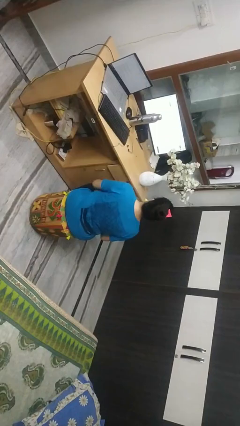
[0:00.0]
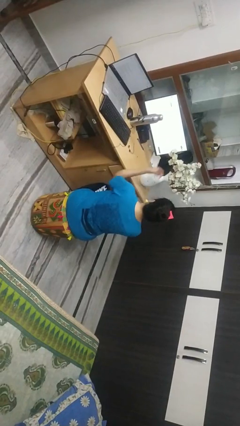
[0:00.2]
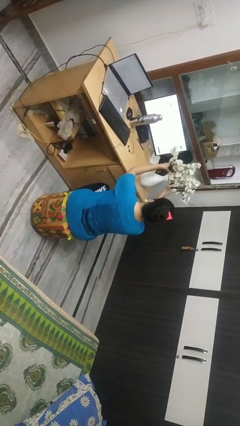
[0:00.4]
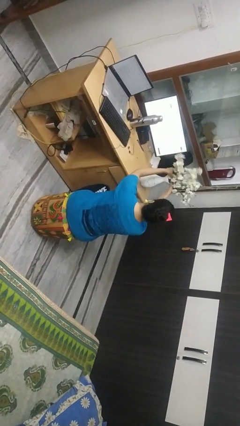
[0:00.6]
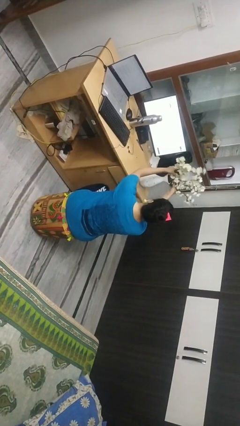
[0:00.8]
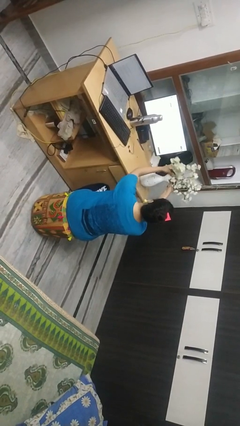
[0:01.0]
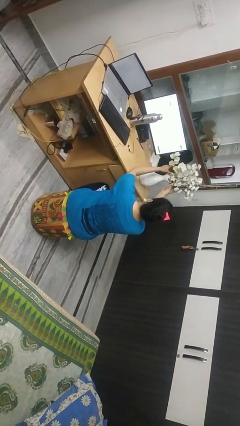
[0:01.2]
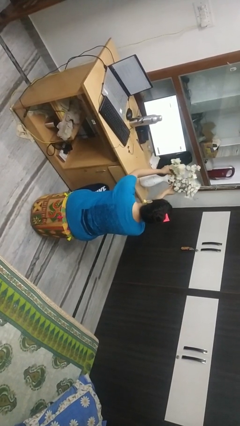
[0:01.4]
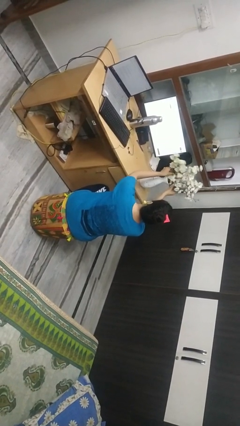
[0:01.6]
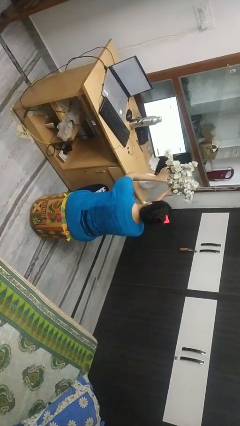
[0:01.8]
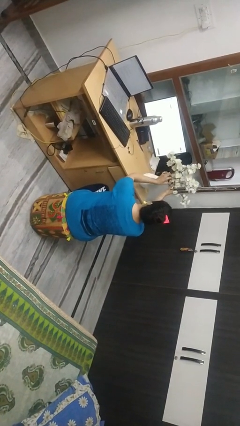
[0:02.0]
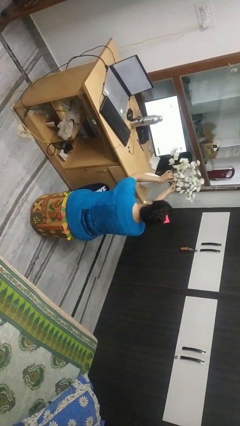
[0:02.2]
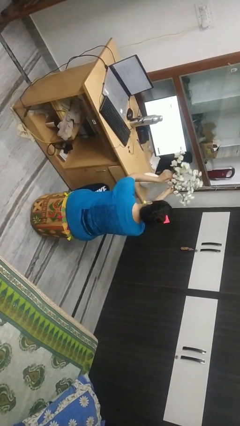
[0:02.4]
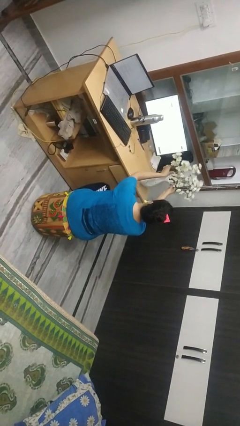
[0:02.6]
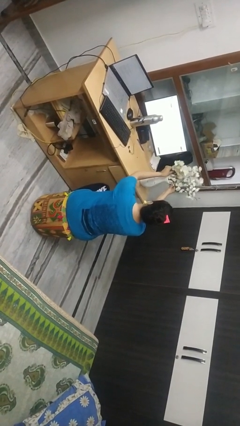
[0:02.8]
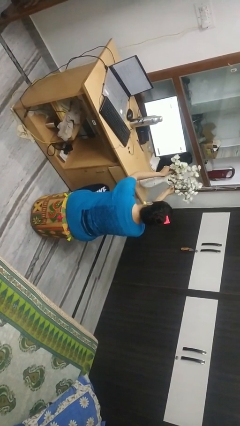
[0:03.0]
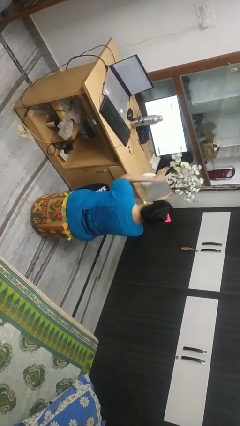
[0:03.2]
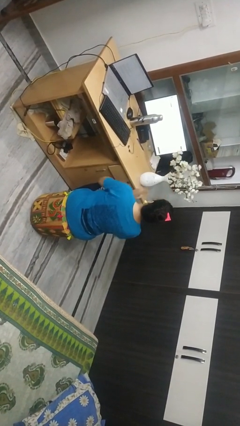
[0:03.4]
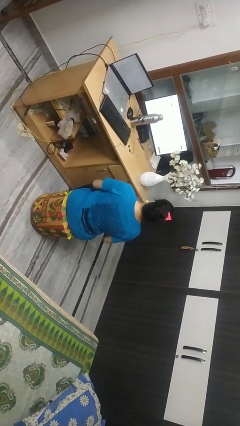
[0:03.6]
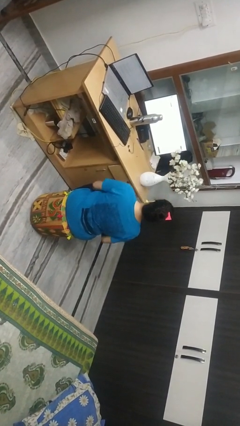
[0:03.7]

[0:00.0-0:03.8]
person arranges flowers in vase

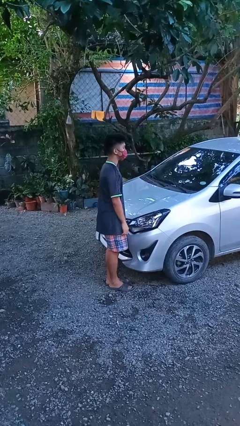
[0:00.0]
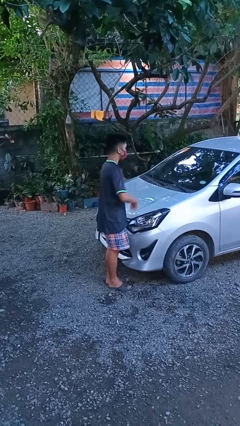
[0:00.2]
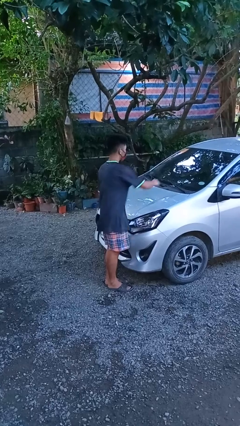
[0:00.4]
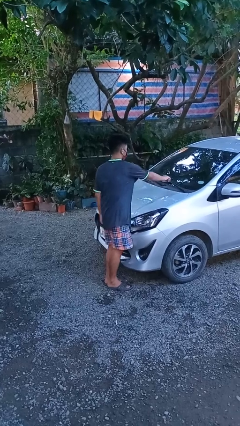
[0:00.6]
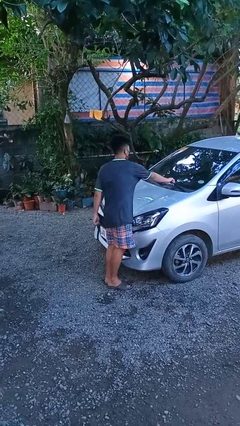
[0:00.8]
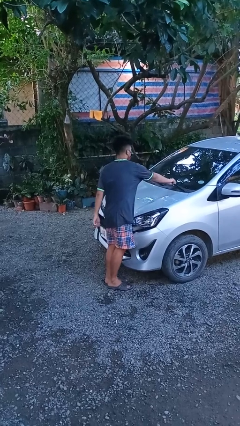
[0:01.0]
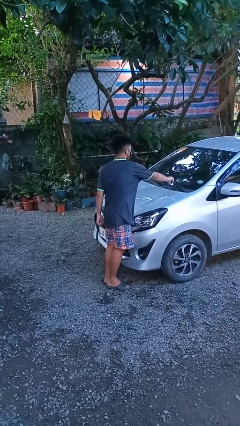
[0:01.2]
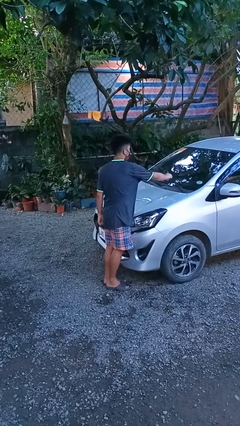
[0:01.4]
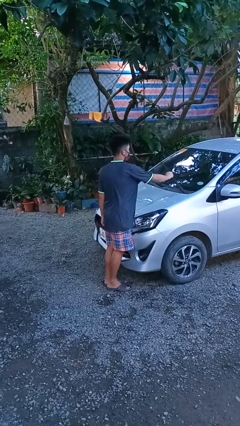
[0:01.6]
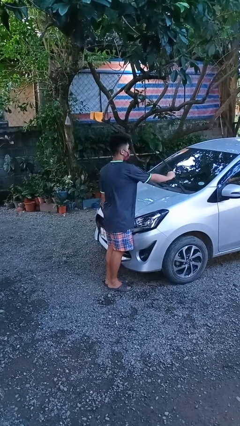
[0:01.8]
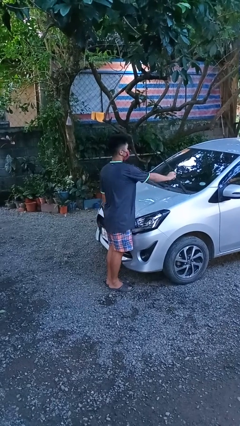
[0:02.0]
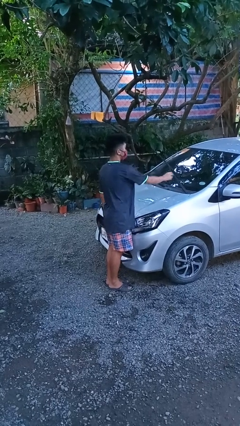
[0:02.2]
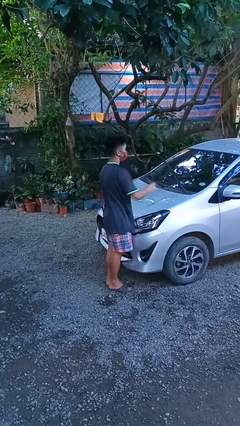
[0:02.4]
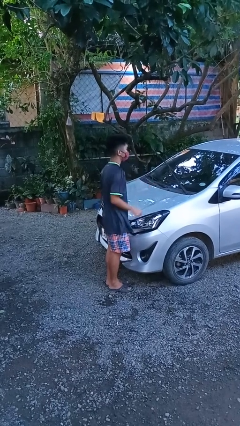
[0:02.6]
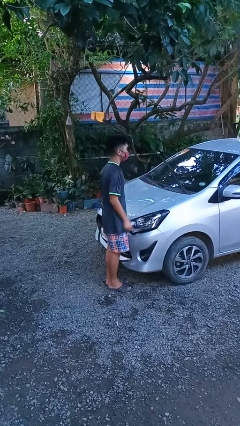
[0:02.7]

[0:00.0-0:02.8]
person flips up car wipers

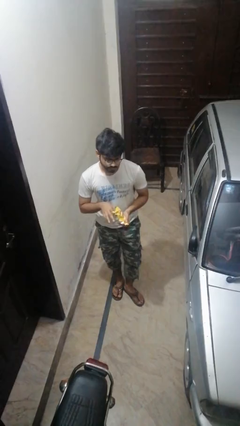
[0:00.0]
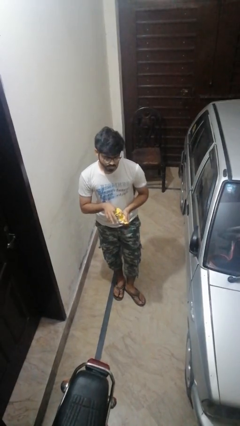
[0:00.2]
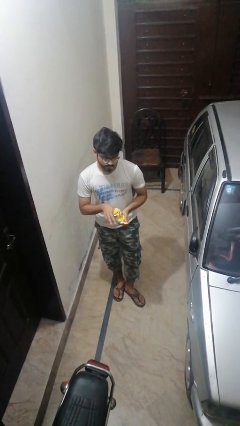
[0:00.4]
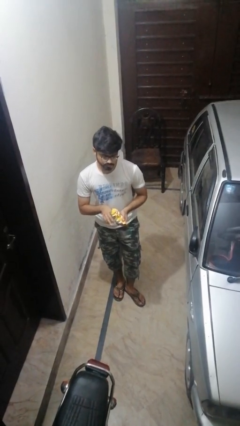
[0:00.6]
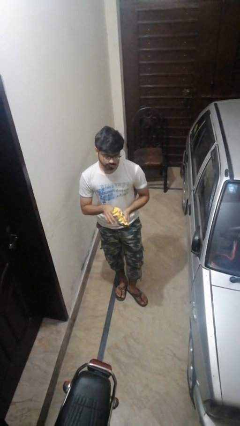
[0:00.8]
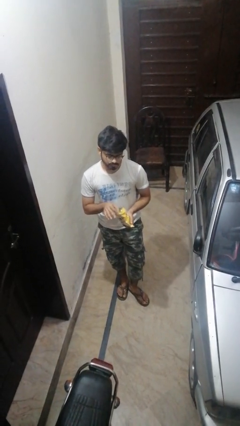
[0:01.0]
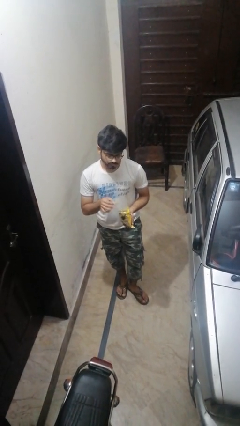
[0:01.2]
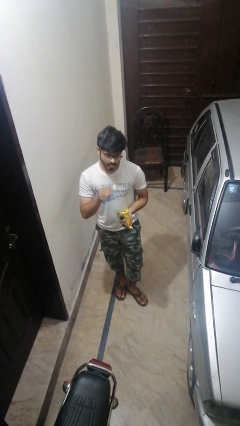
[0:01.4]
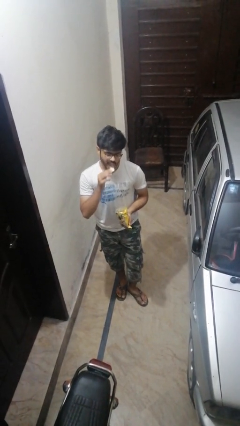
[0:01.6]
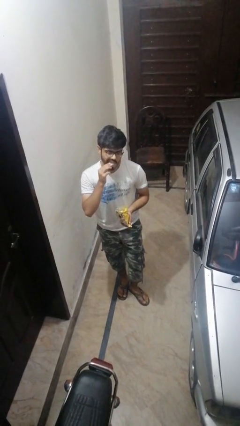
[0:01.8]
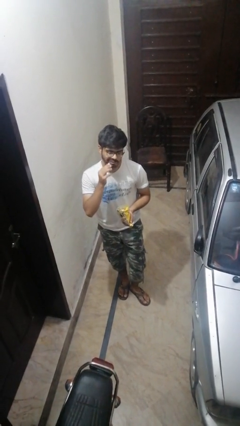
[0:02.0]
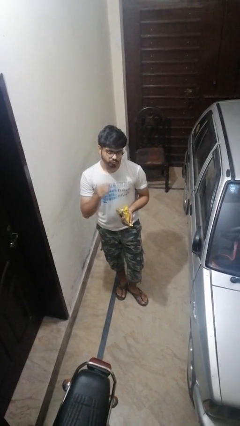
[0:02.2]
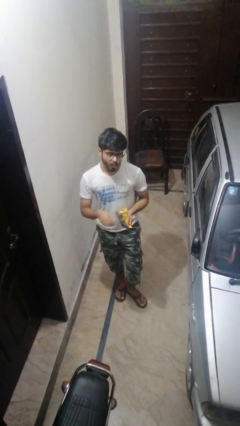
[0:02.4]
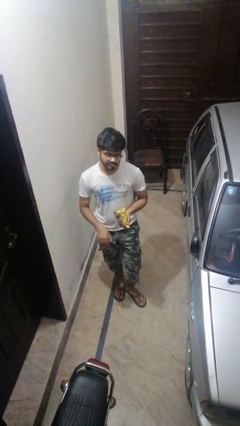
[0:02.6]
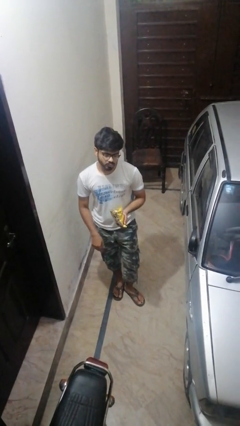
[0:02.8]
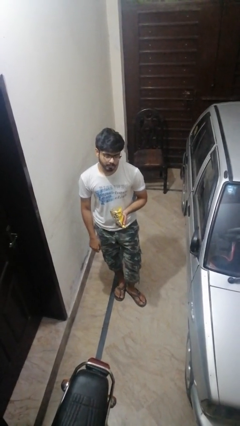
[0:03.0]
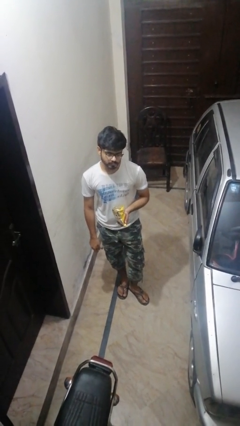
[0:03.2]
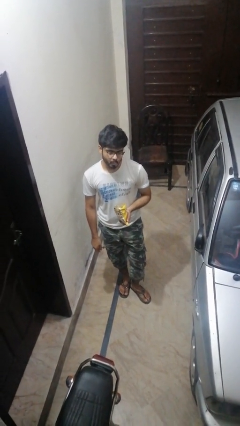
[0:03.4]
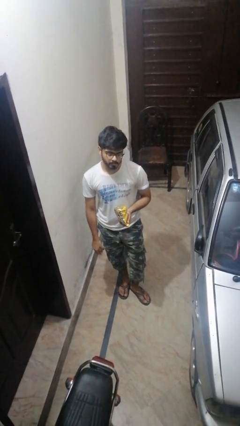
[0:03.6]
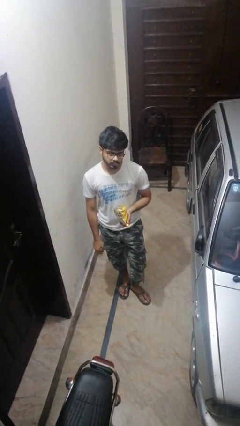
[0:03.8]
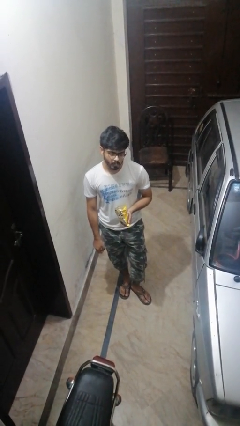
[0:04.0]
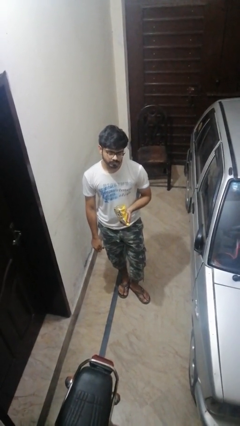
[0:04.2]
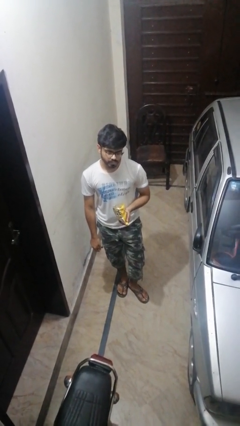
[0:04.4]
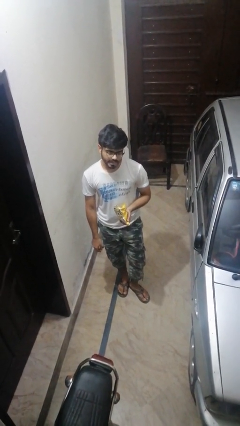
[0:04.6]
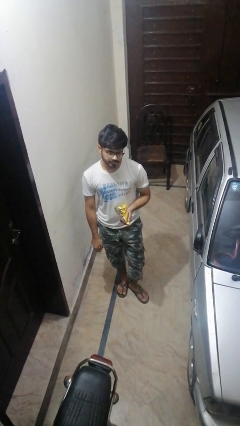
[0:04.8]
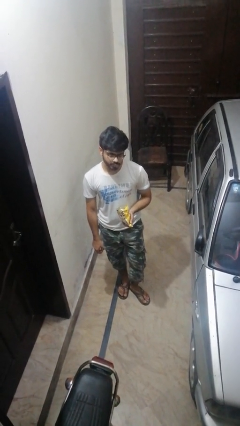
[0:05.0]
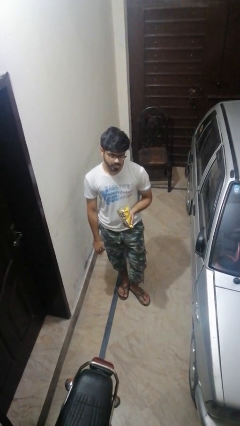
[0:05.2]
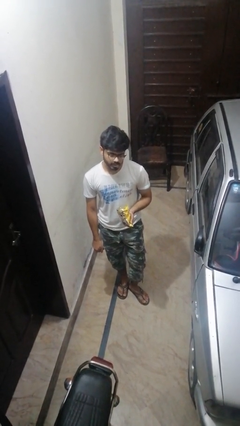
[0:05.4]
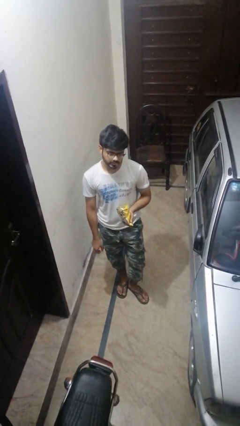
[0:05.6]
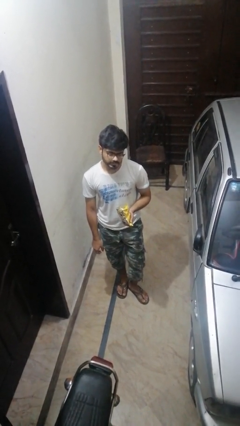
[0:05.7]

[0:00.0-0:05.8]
person eats snack from bag

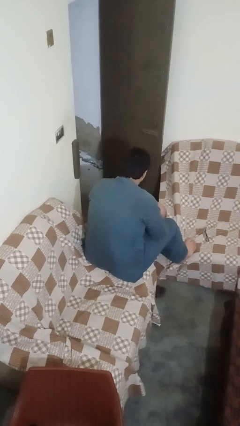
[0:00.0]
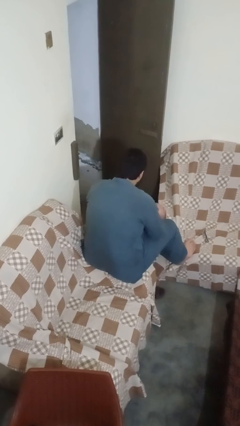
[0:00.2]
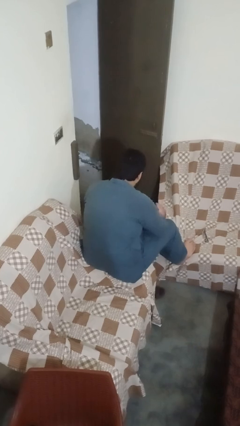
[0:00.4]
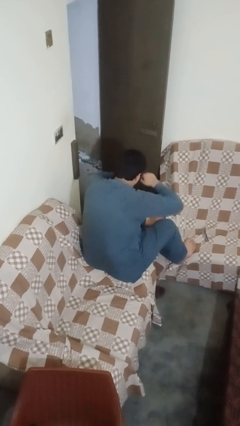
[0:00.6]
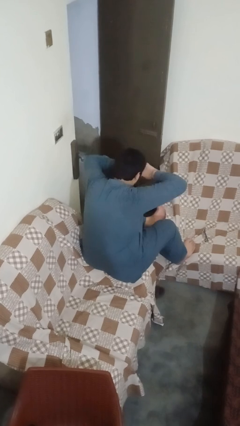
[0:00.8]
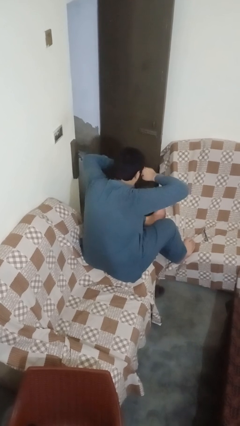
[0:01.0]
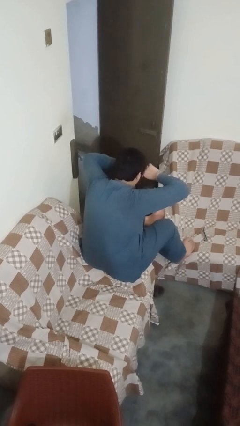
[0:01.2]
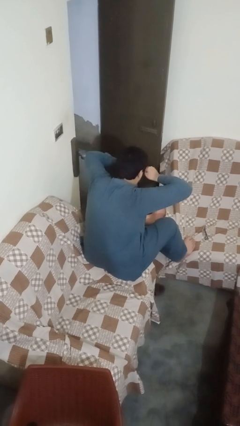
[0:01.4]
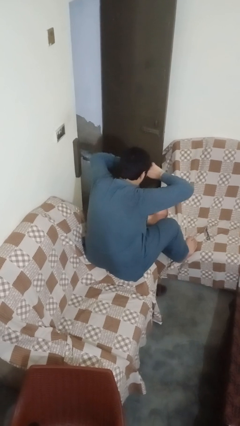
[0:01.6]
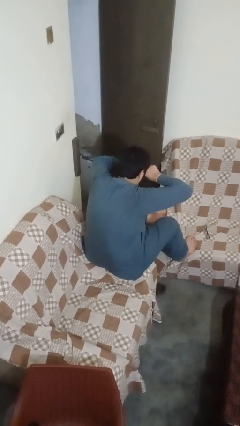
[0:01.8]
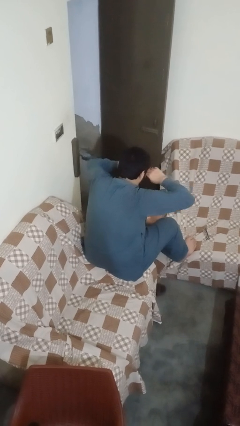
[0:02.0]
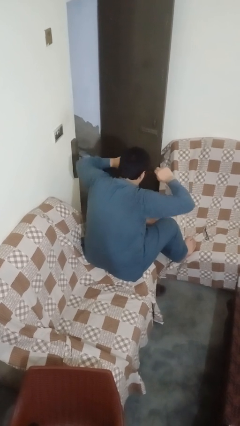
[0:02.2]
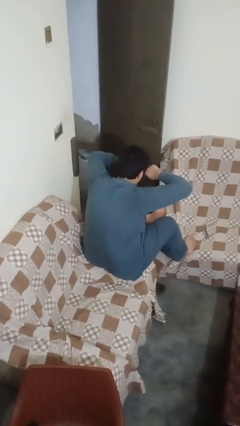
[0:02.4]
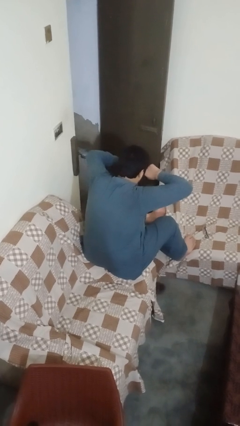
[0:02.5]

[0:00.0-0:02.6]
person rubs eyes

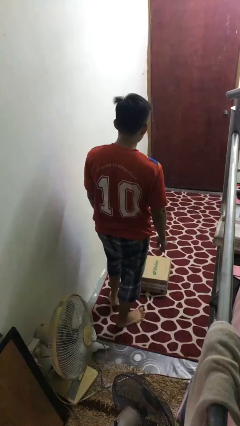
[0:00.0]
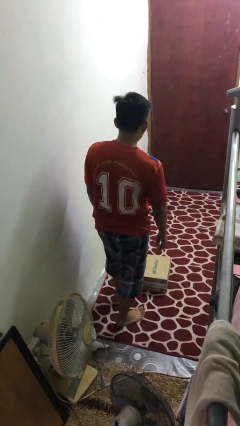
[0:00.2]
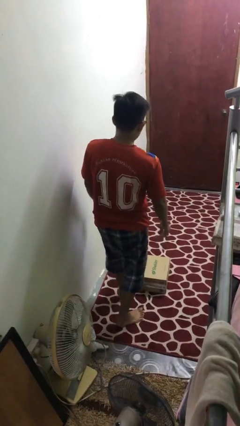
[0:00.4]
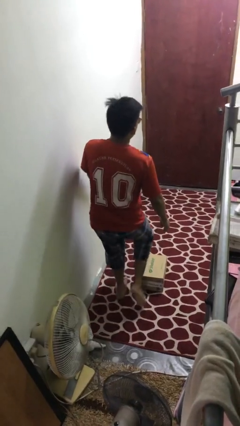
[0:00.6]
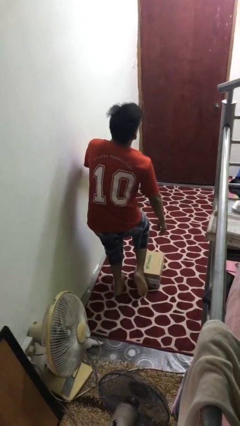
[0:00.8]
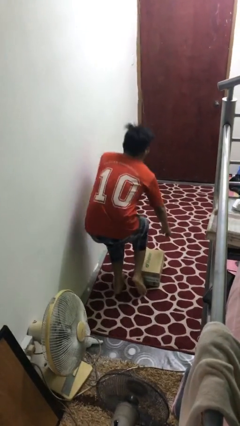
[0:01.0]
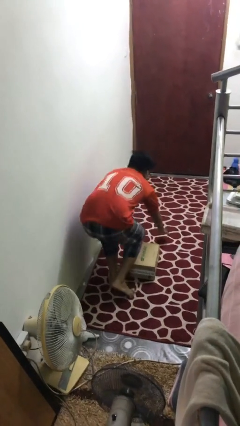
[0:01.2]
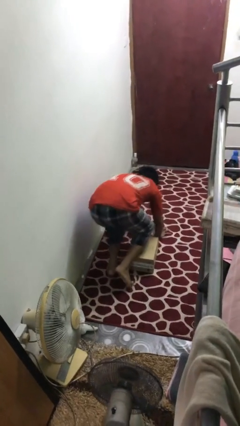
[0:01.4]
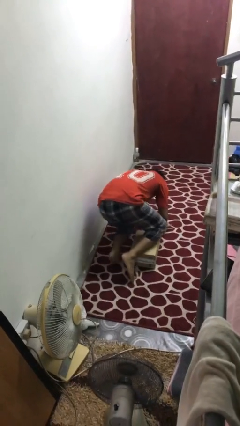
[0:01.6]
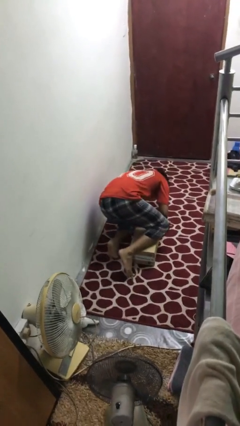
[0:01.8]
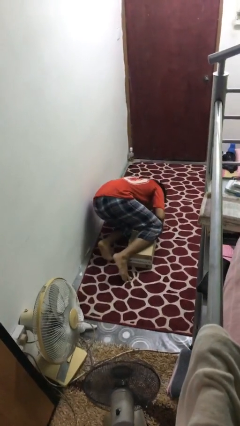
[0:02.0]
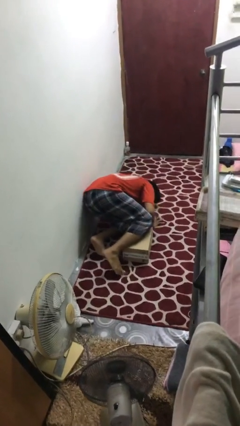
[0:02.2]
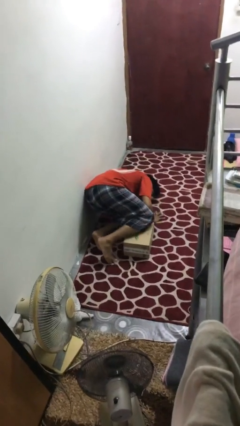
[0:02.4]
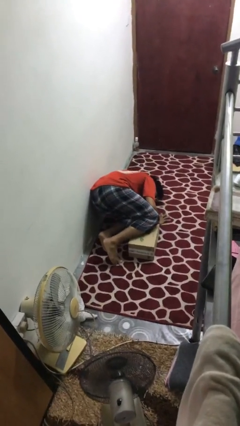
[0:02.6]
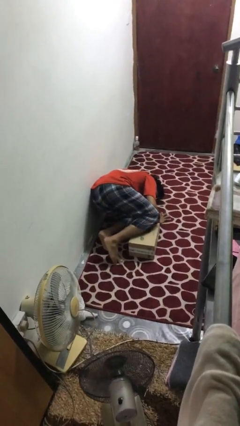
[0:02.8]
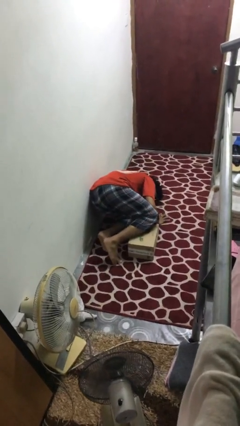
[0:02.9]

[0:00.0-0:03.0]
person trips on object on floor
